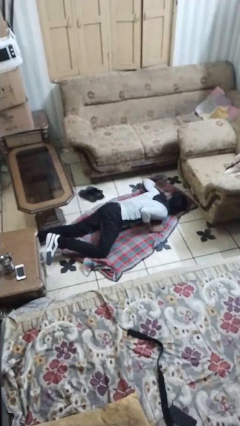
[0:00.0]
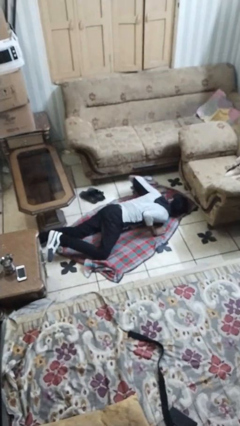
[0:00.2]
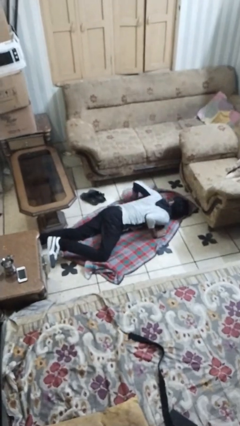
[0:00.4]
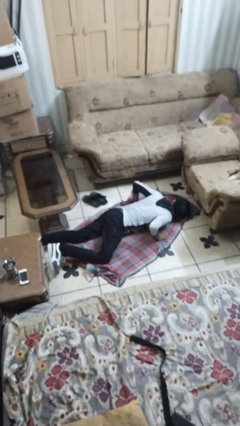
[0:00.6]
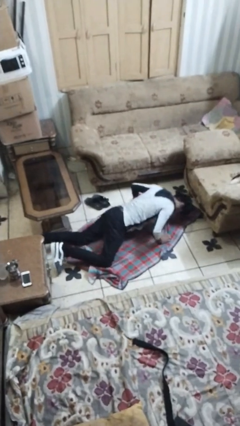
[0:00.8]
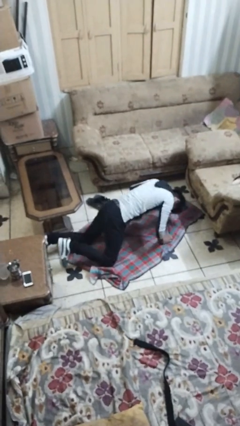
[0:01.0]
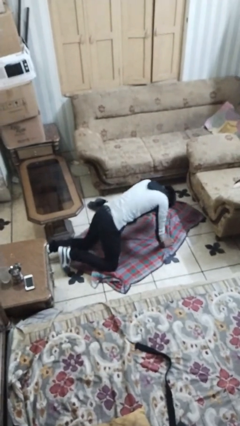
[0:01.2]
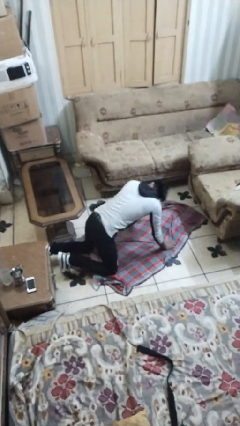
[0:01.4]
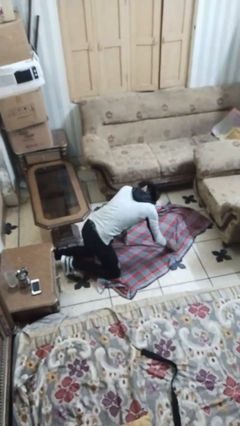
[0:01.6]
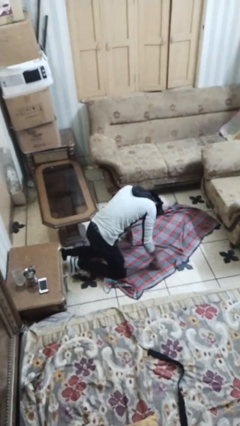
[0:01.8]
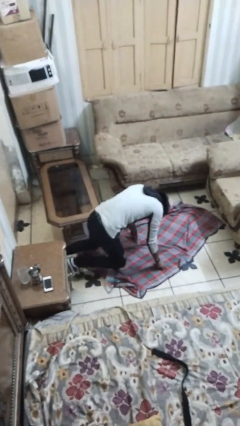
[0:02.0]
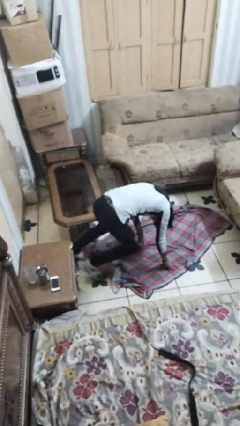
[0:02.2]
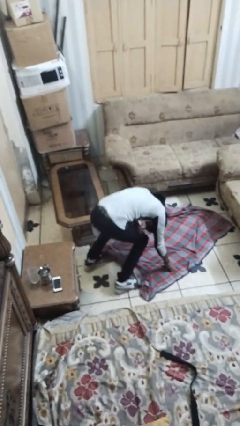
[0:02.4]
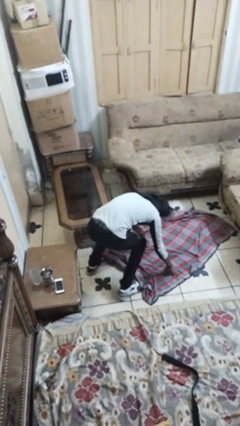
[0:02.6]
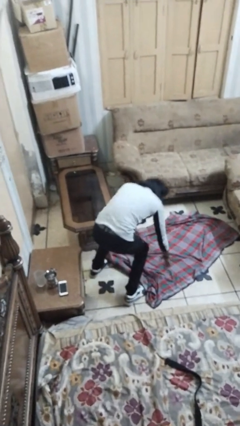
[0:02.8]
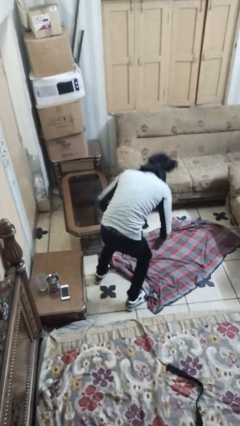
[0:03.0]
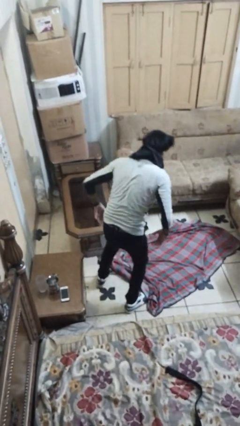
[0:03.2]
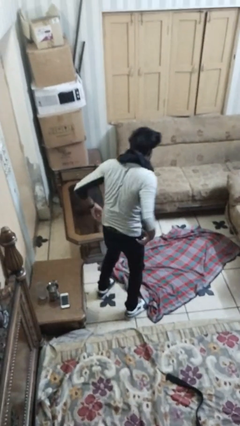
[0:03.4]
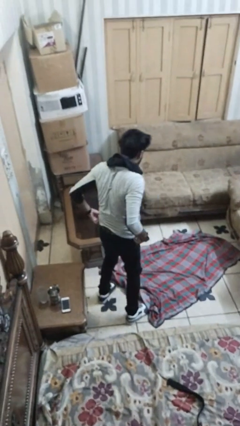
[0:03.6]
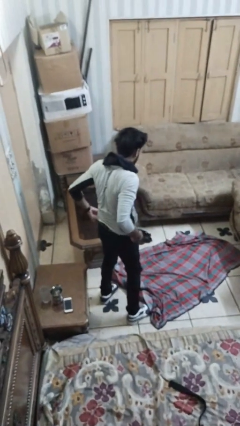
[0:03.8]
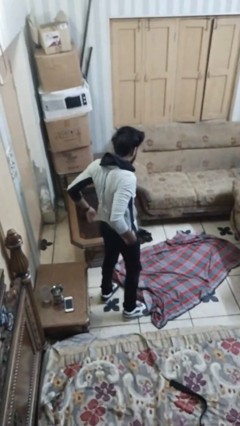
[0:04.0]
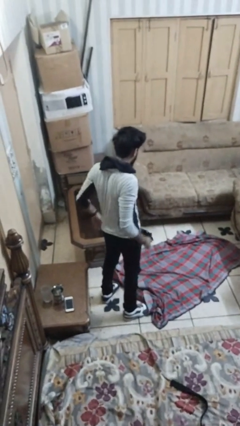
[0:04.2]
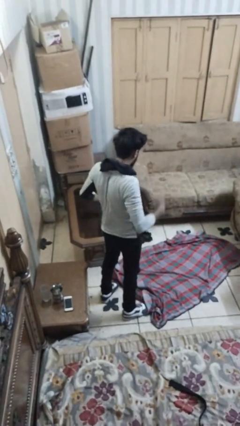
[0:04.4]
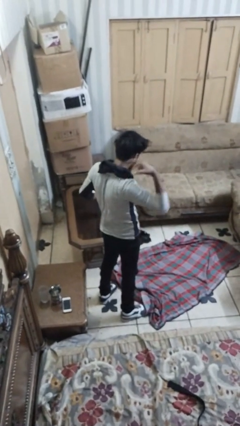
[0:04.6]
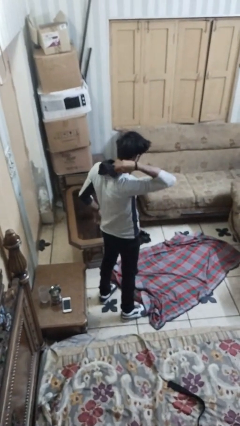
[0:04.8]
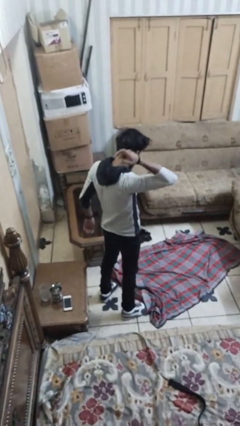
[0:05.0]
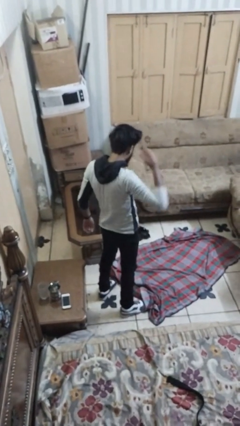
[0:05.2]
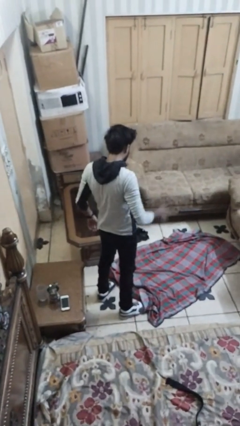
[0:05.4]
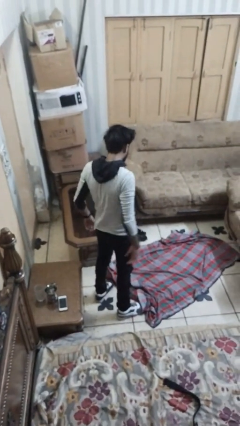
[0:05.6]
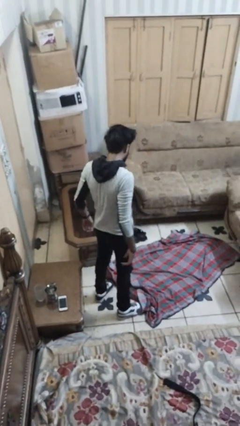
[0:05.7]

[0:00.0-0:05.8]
person stands up from floor

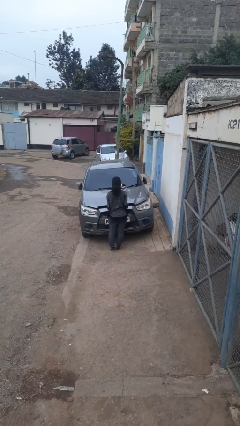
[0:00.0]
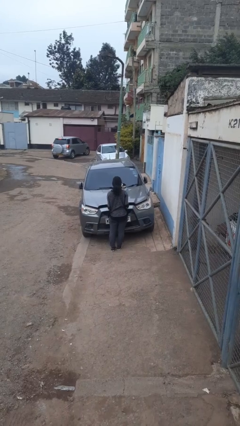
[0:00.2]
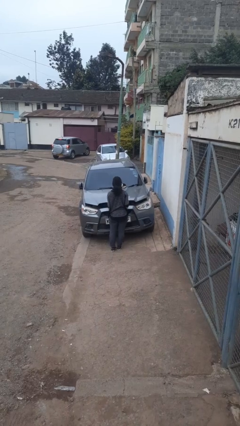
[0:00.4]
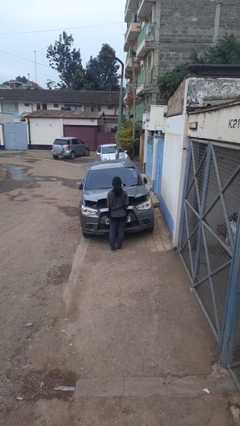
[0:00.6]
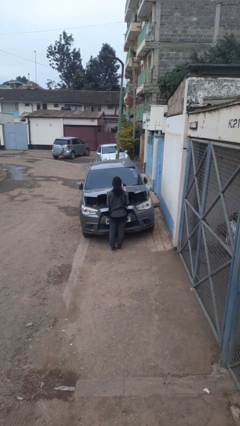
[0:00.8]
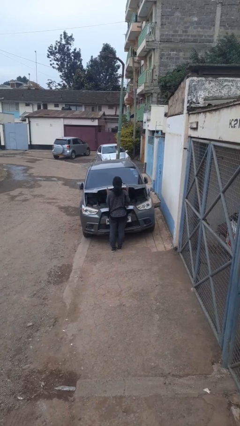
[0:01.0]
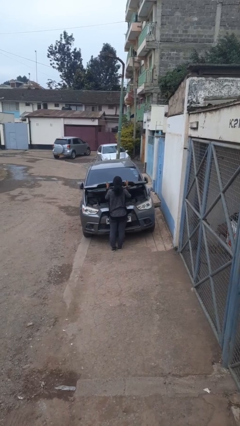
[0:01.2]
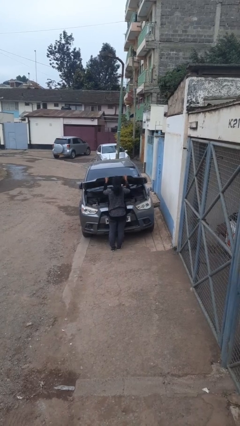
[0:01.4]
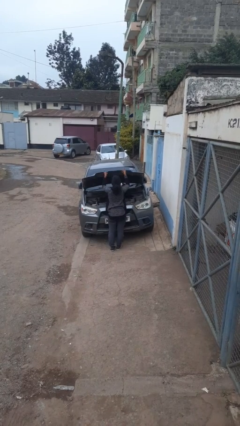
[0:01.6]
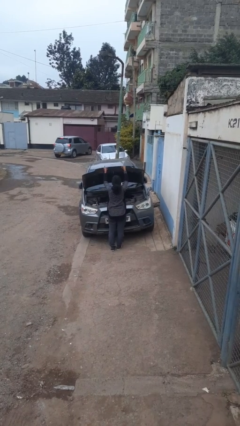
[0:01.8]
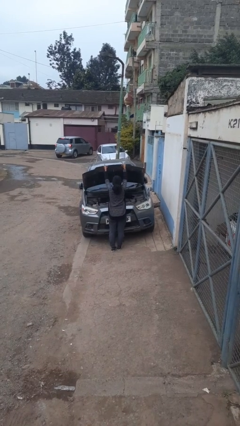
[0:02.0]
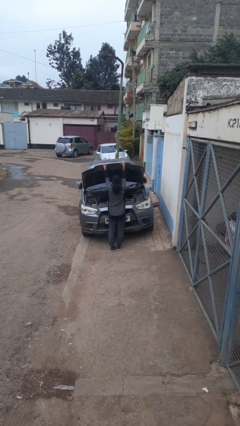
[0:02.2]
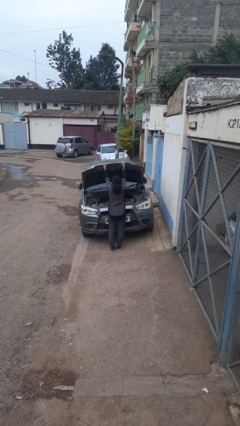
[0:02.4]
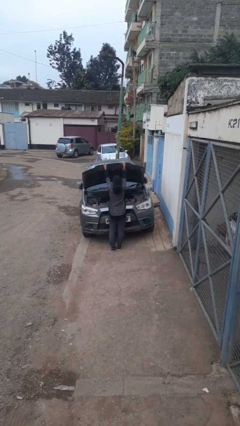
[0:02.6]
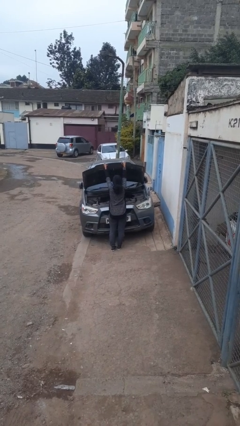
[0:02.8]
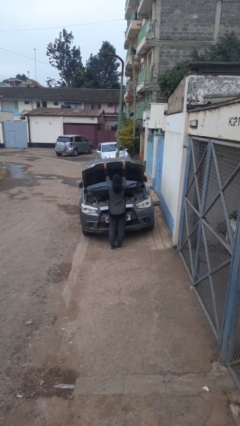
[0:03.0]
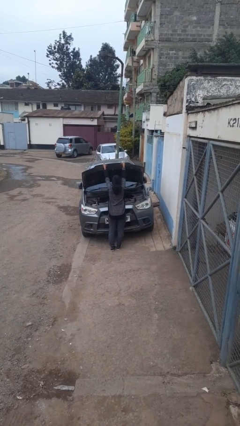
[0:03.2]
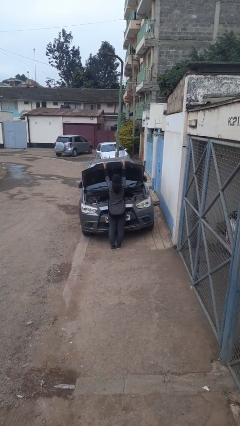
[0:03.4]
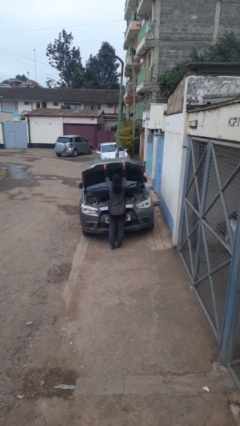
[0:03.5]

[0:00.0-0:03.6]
person opens car hood

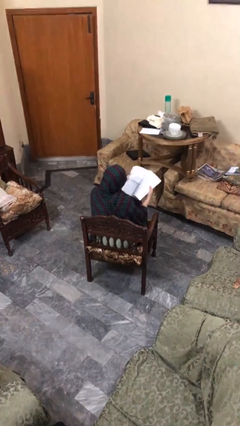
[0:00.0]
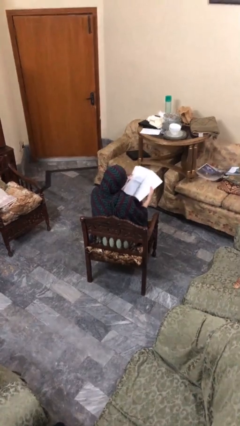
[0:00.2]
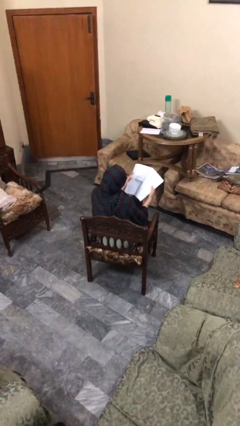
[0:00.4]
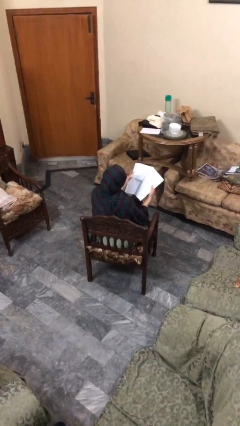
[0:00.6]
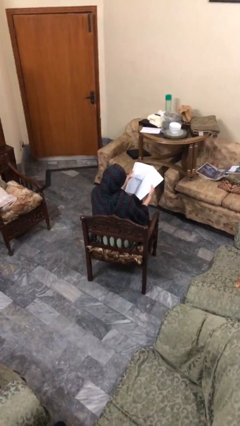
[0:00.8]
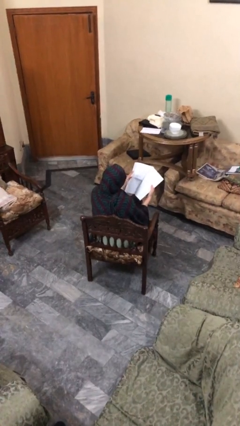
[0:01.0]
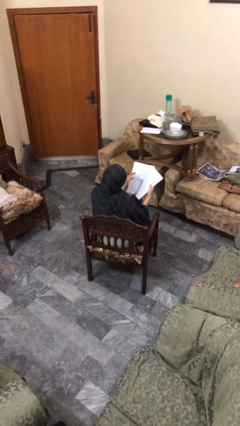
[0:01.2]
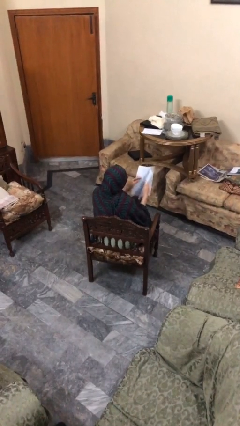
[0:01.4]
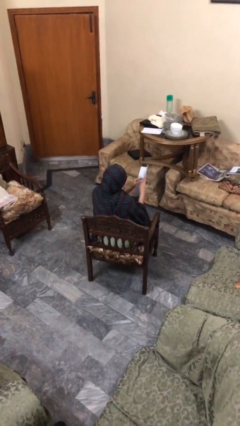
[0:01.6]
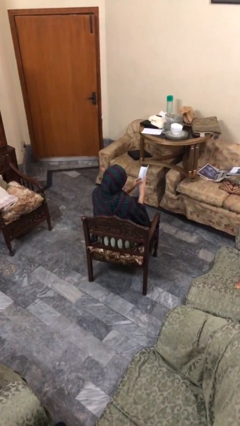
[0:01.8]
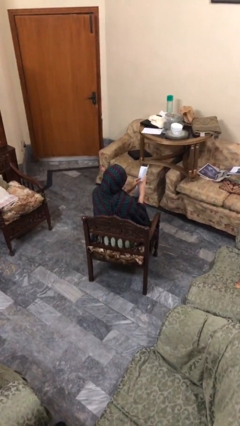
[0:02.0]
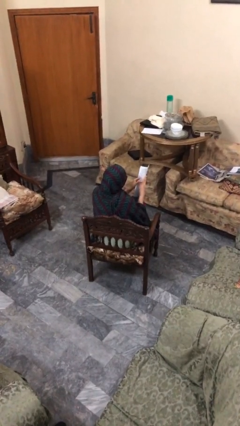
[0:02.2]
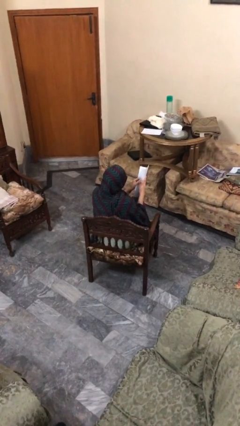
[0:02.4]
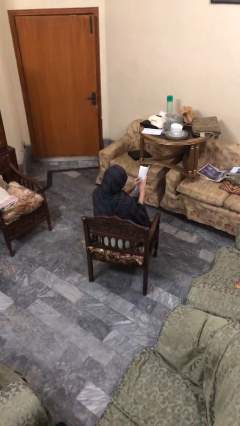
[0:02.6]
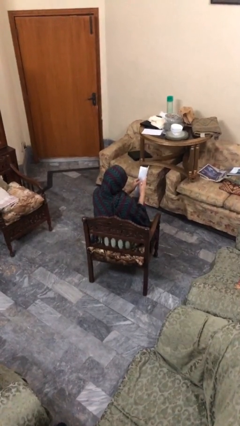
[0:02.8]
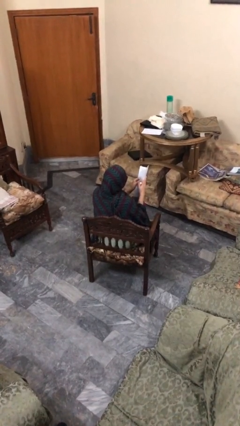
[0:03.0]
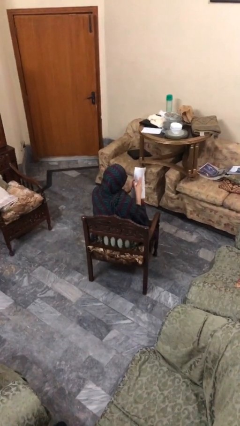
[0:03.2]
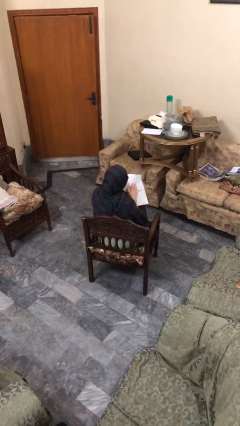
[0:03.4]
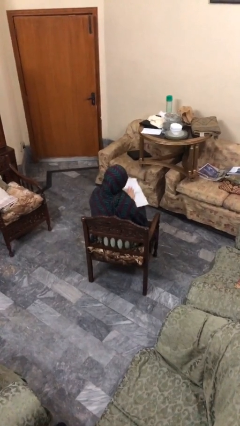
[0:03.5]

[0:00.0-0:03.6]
person reads magazine

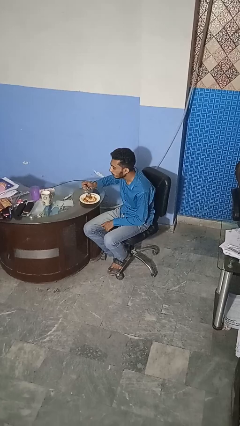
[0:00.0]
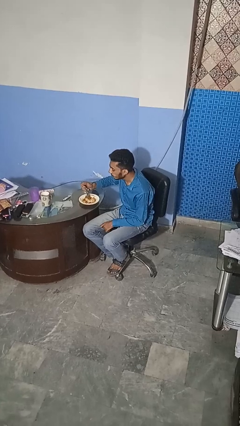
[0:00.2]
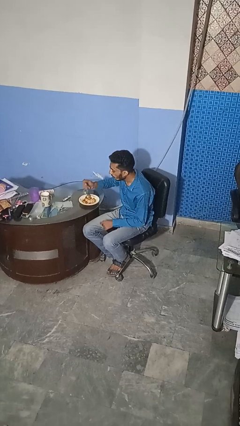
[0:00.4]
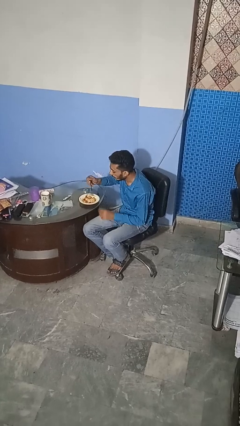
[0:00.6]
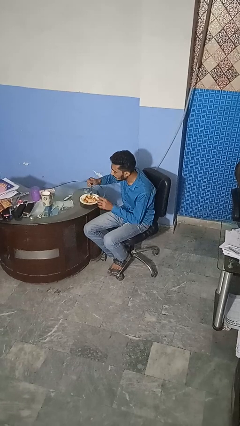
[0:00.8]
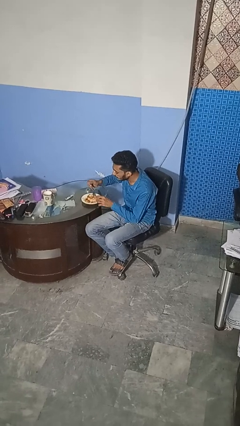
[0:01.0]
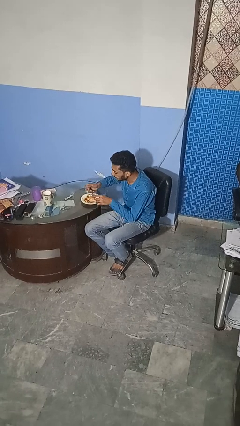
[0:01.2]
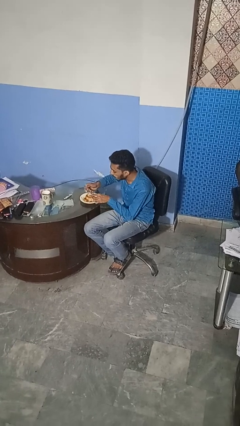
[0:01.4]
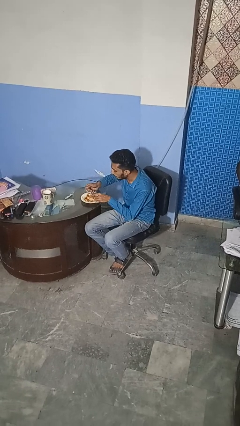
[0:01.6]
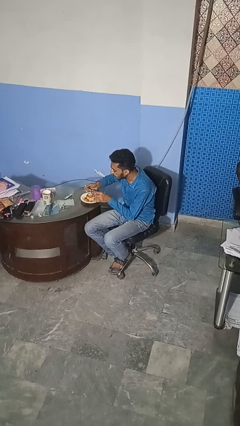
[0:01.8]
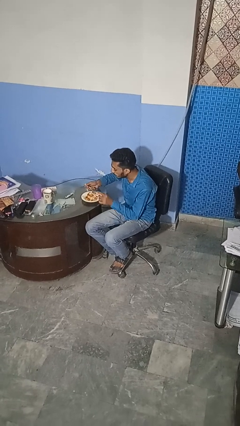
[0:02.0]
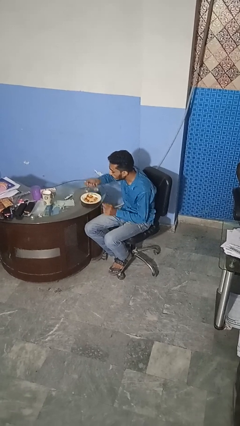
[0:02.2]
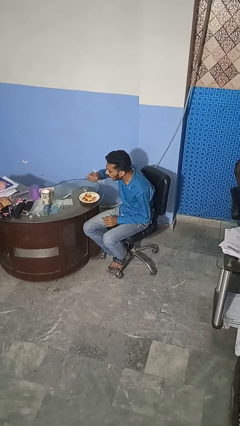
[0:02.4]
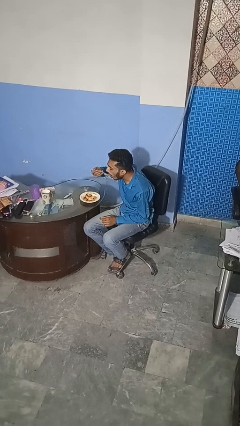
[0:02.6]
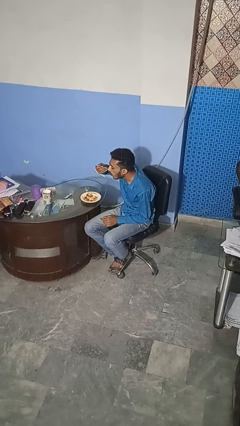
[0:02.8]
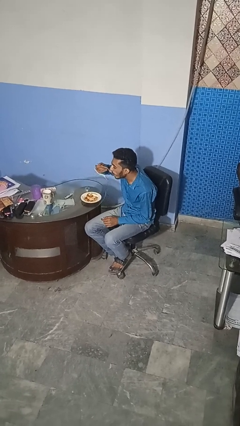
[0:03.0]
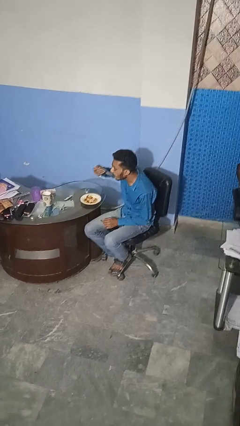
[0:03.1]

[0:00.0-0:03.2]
person eats with utensil

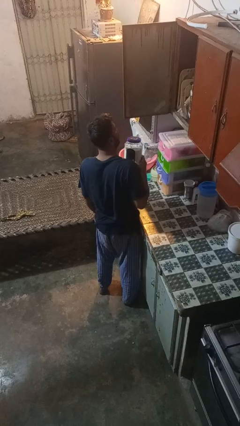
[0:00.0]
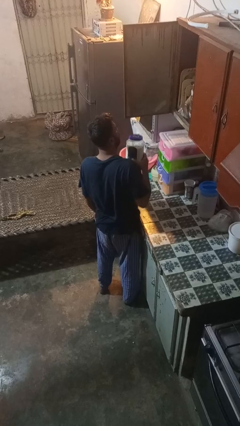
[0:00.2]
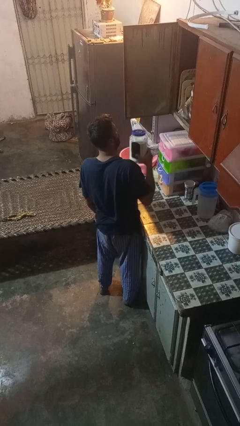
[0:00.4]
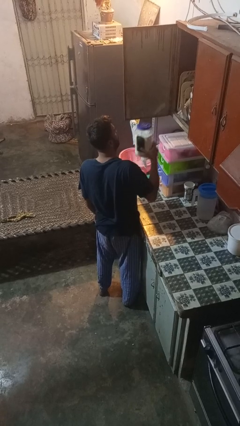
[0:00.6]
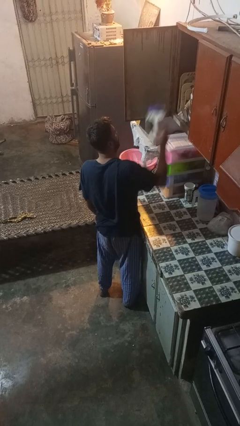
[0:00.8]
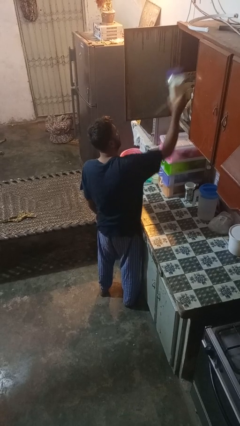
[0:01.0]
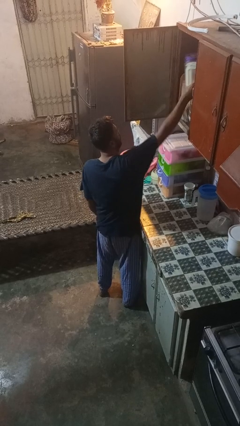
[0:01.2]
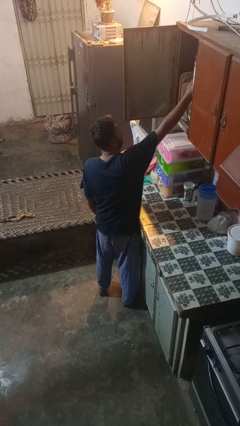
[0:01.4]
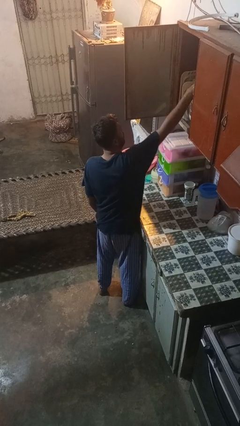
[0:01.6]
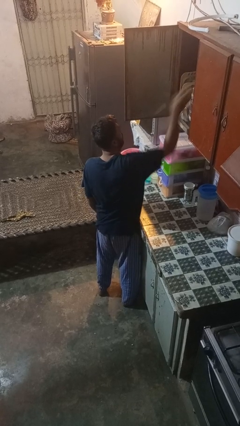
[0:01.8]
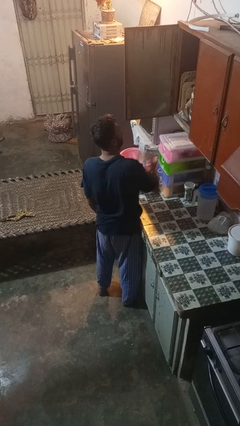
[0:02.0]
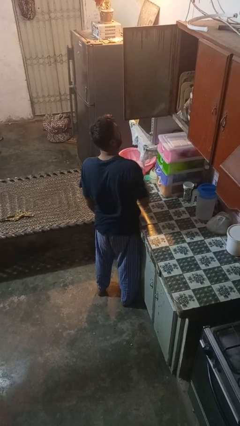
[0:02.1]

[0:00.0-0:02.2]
person takes object from cabinet
